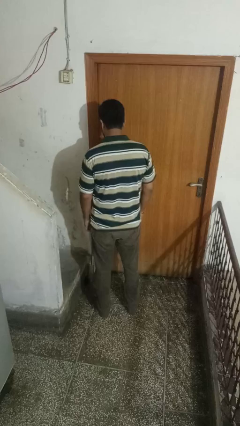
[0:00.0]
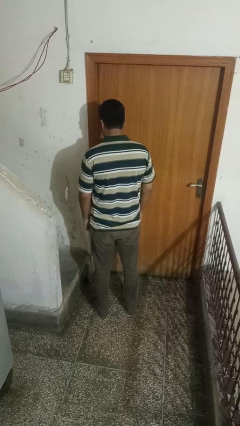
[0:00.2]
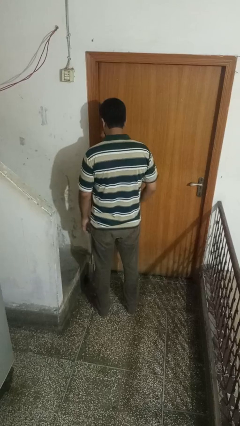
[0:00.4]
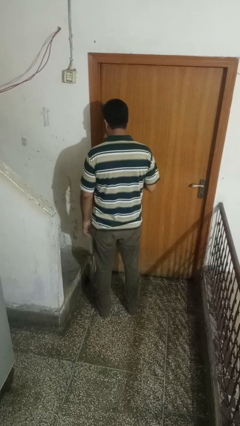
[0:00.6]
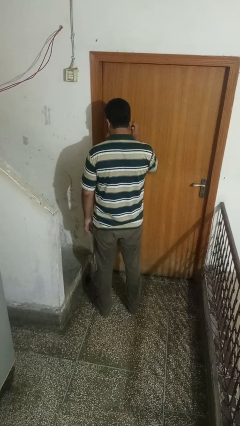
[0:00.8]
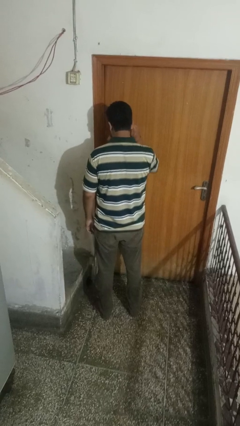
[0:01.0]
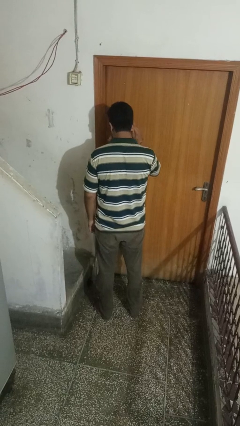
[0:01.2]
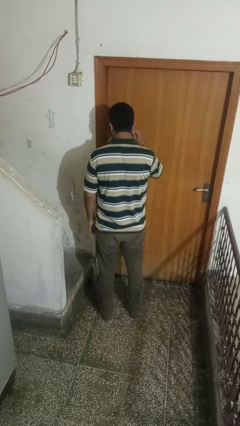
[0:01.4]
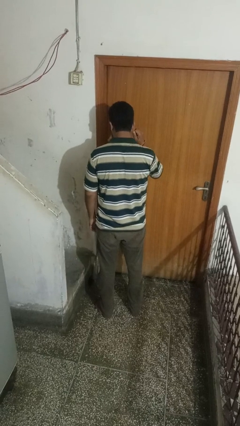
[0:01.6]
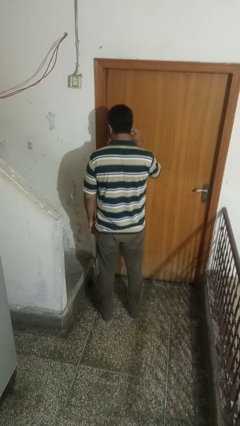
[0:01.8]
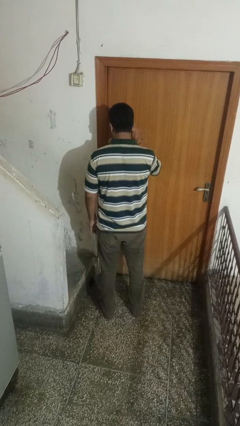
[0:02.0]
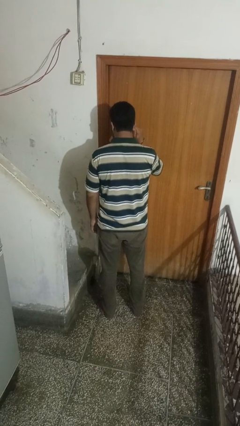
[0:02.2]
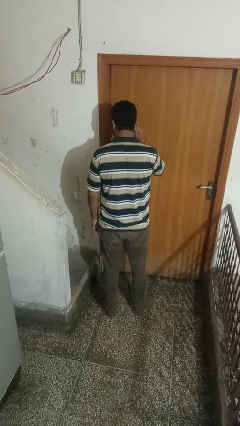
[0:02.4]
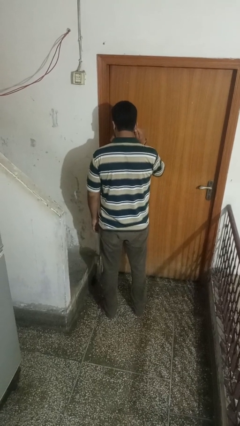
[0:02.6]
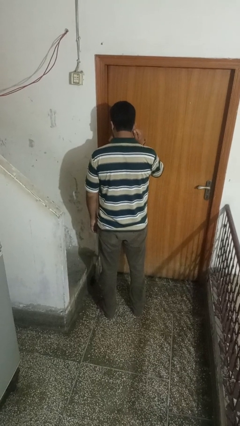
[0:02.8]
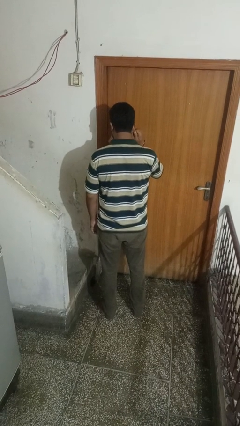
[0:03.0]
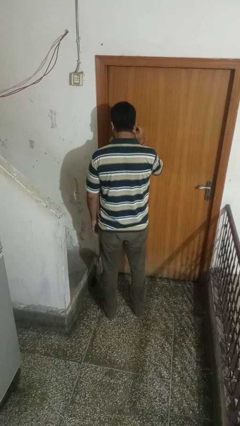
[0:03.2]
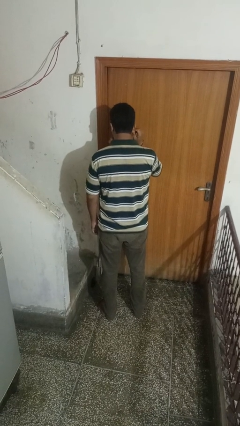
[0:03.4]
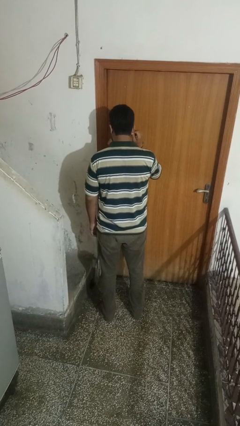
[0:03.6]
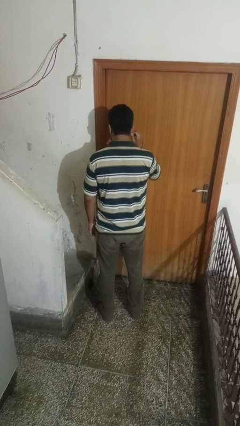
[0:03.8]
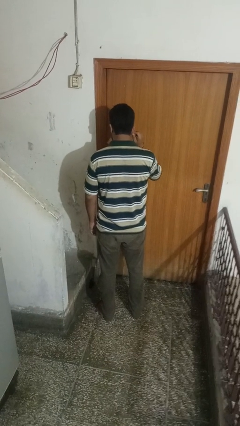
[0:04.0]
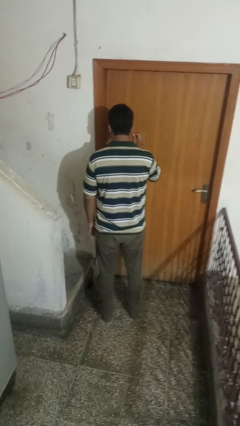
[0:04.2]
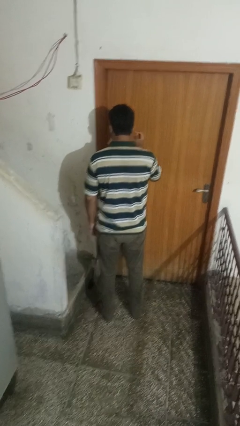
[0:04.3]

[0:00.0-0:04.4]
person touches earlobe

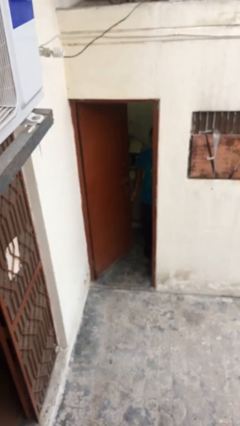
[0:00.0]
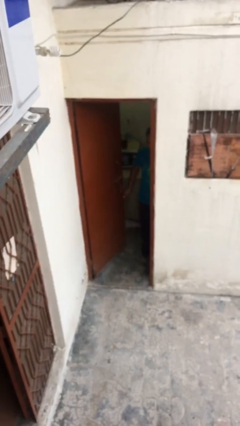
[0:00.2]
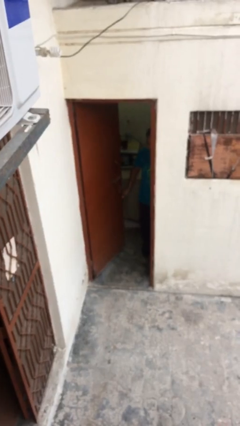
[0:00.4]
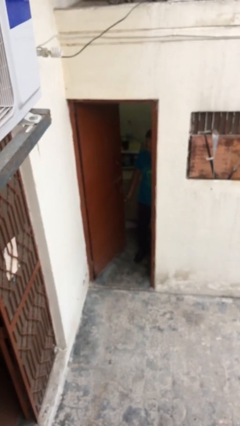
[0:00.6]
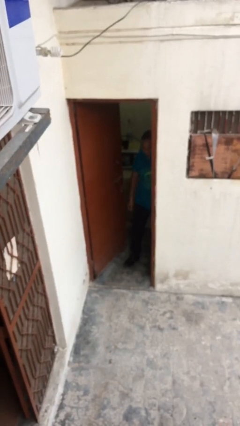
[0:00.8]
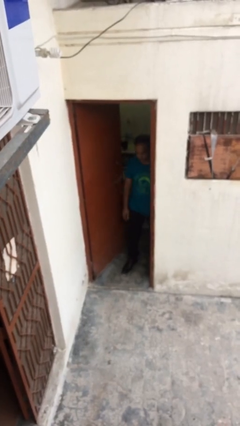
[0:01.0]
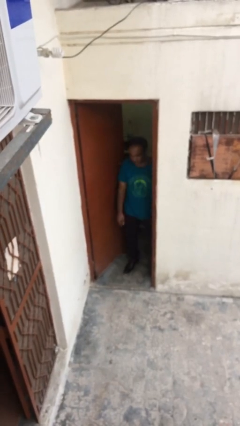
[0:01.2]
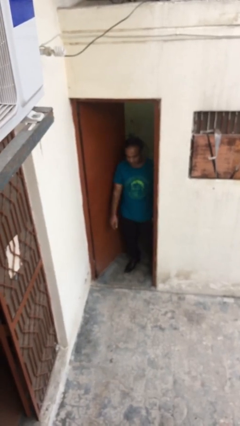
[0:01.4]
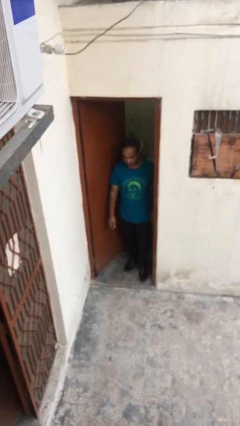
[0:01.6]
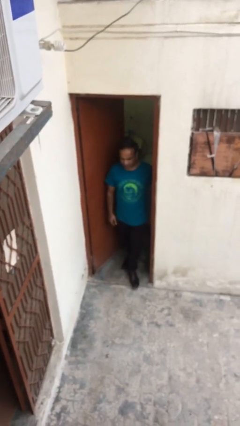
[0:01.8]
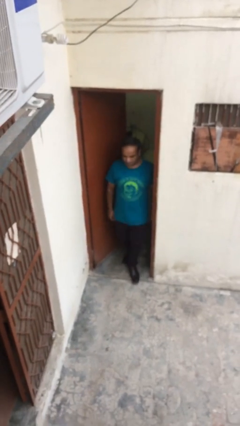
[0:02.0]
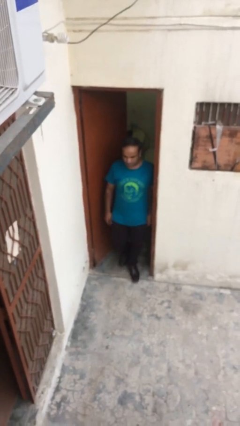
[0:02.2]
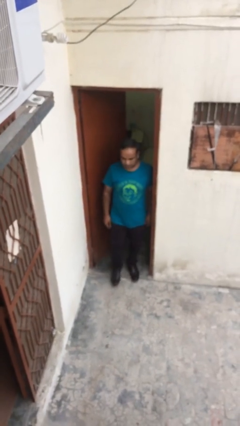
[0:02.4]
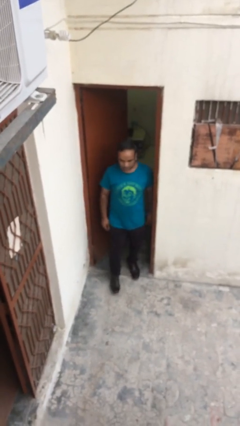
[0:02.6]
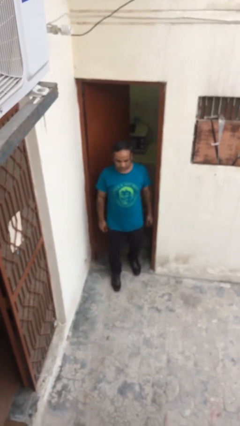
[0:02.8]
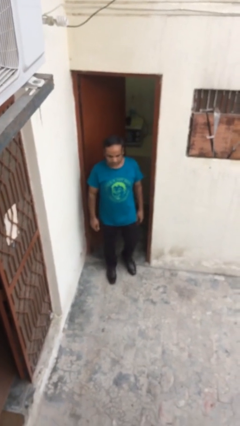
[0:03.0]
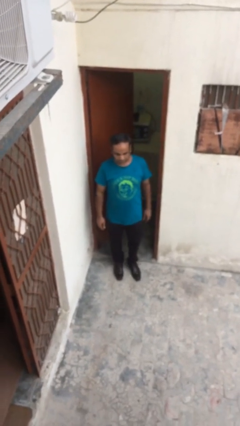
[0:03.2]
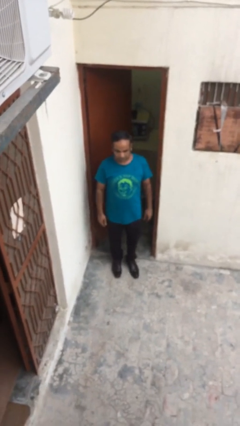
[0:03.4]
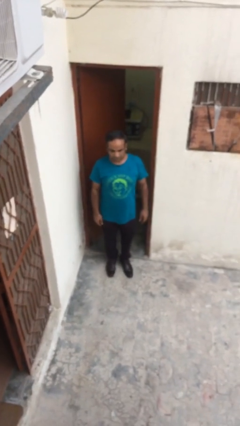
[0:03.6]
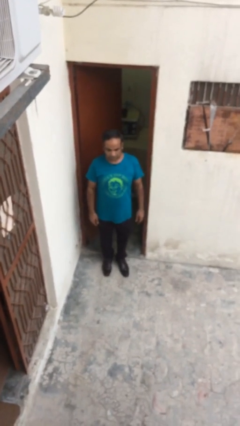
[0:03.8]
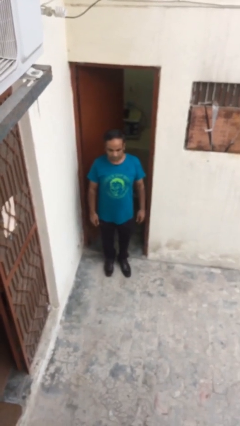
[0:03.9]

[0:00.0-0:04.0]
person enters scene through structure

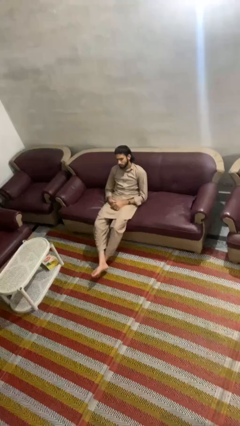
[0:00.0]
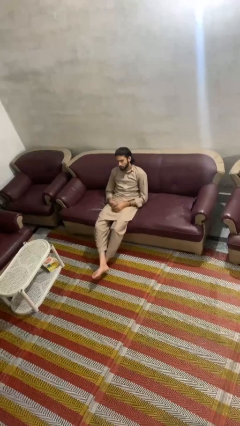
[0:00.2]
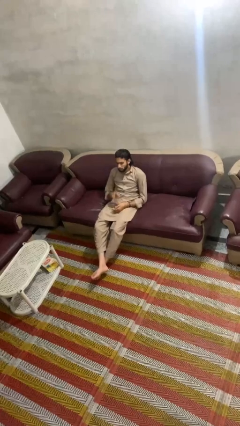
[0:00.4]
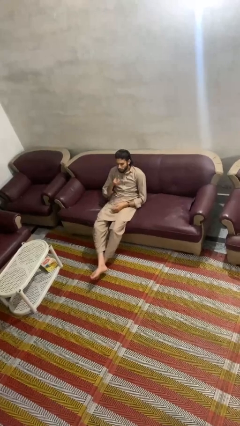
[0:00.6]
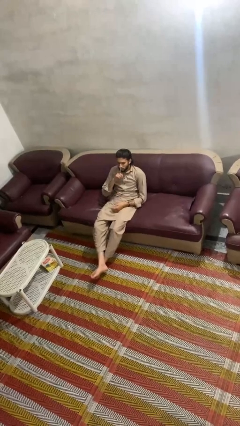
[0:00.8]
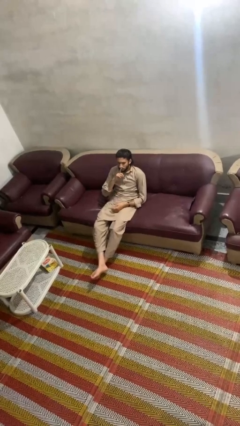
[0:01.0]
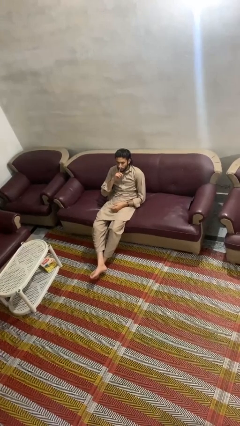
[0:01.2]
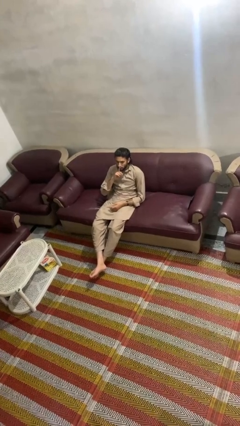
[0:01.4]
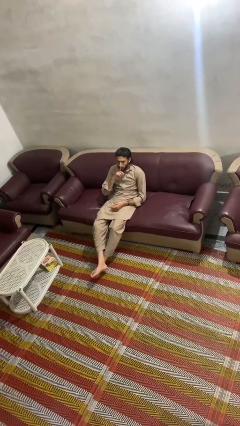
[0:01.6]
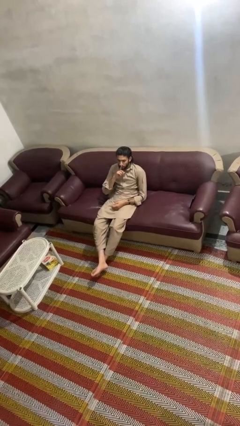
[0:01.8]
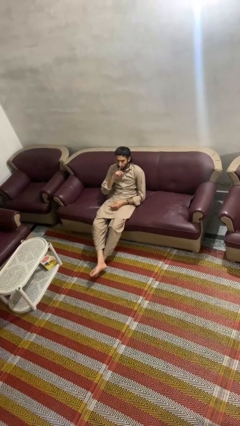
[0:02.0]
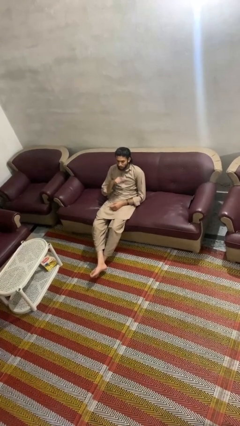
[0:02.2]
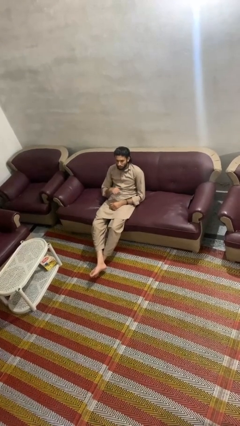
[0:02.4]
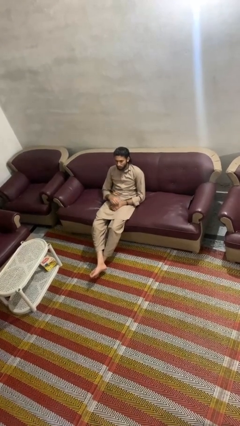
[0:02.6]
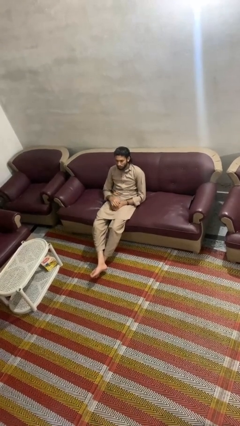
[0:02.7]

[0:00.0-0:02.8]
person gestures be quiet

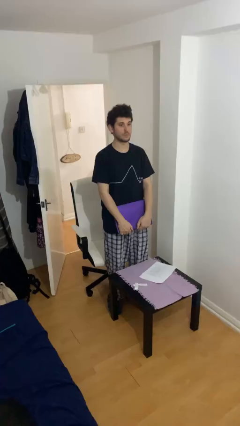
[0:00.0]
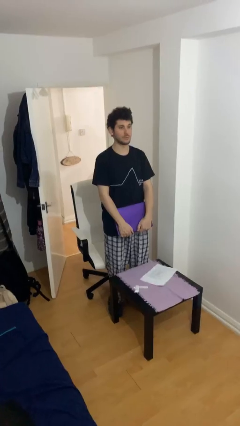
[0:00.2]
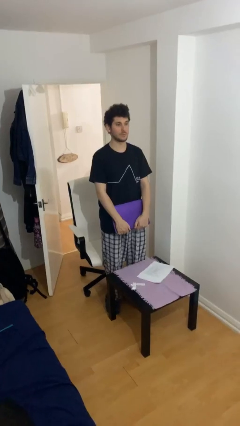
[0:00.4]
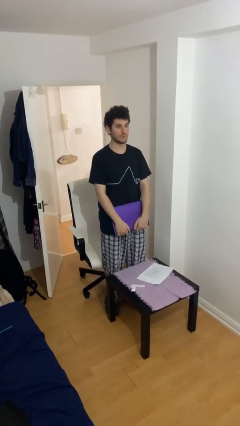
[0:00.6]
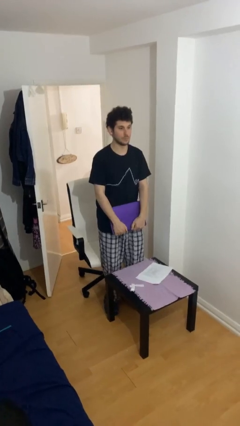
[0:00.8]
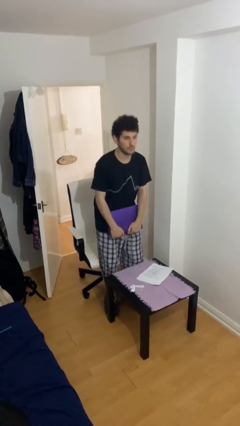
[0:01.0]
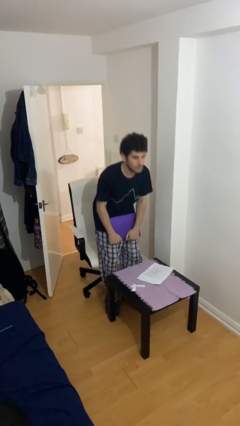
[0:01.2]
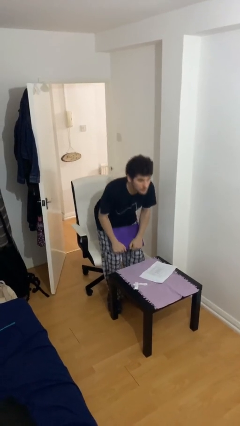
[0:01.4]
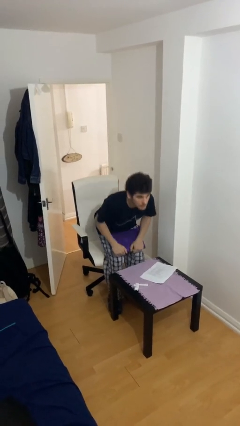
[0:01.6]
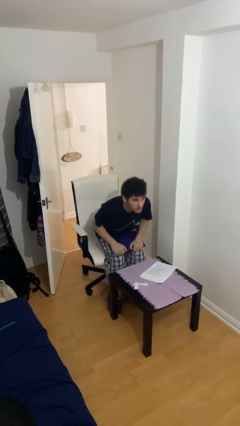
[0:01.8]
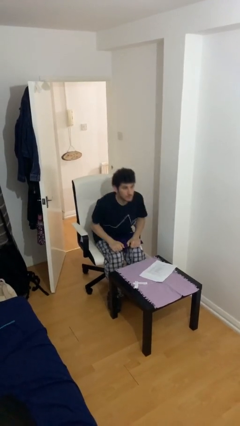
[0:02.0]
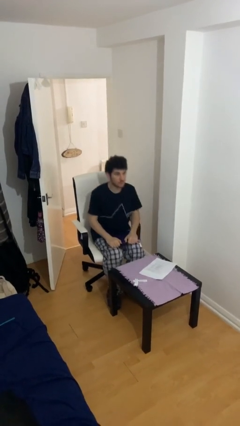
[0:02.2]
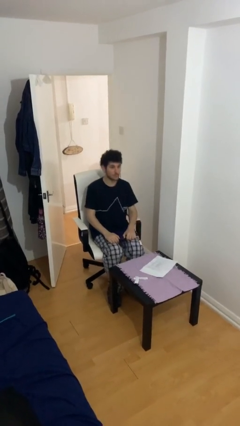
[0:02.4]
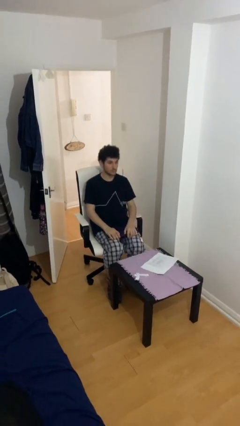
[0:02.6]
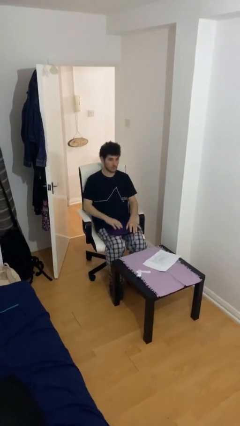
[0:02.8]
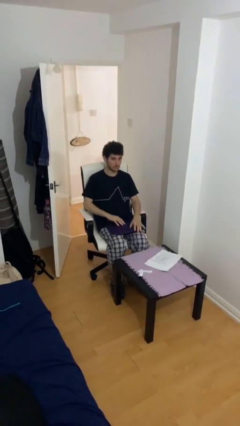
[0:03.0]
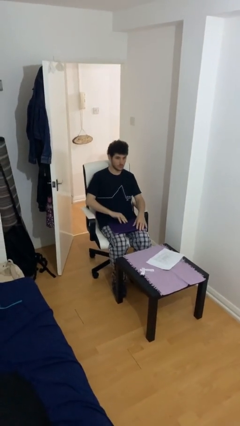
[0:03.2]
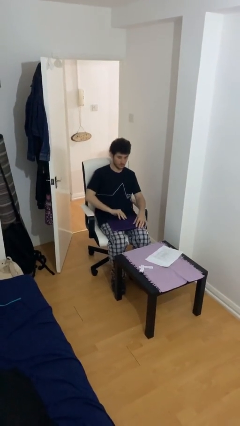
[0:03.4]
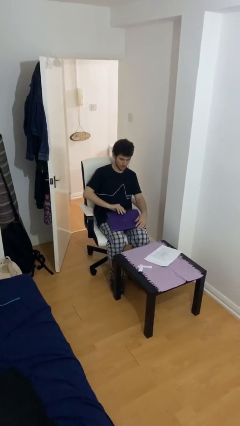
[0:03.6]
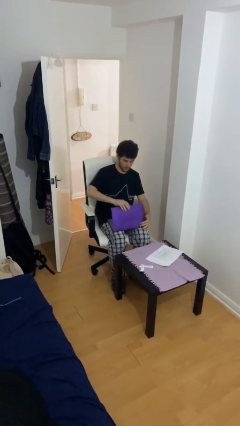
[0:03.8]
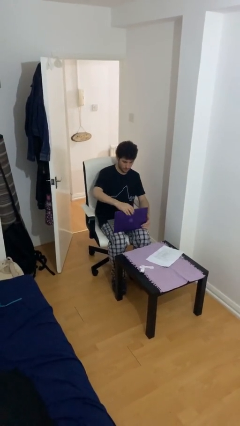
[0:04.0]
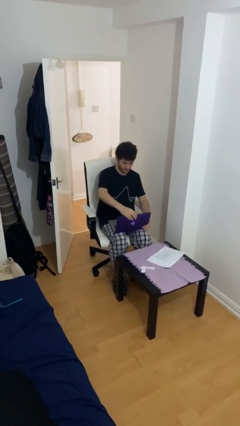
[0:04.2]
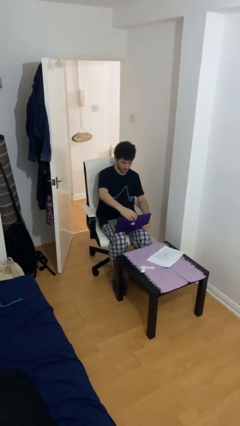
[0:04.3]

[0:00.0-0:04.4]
person sits down

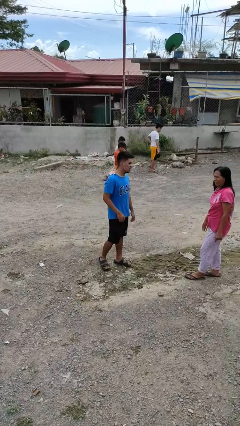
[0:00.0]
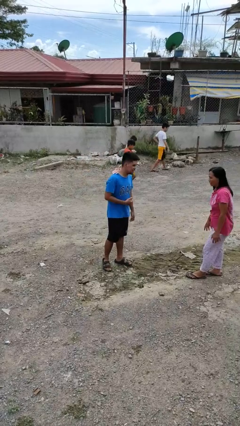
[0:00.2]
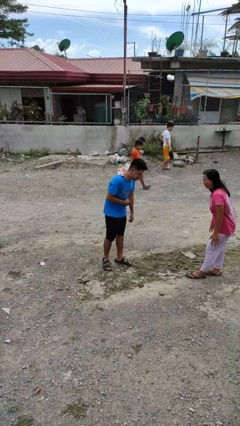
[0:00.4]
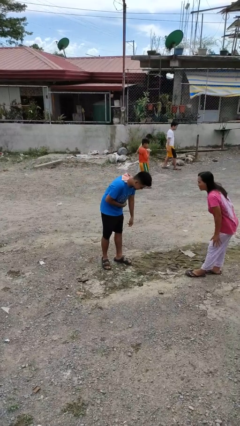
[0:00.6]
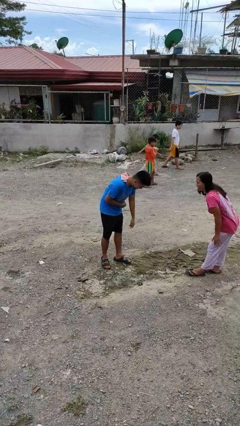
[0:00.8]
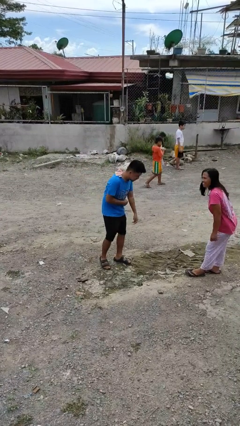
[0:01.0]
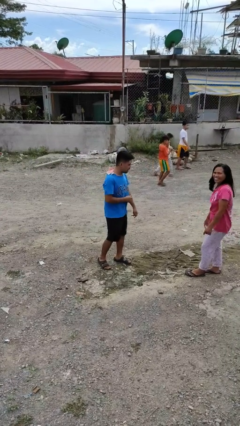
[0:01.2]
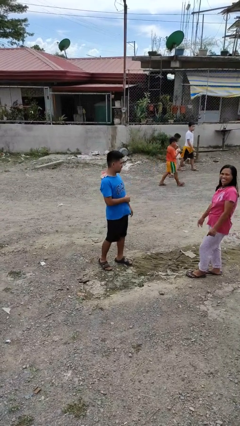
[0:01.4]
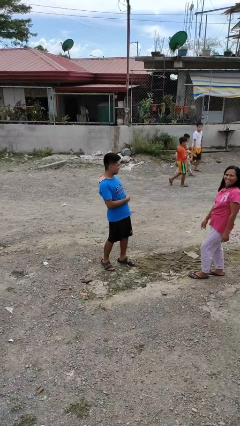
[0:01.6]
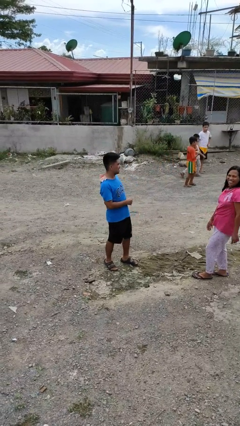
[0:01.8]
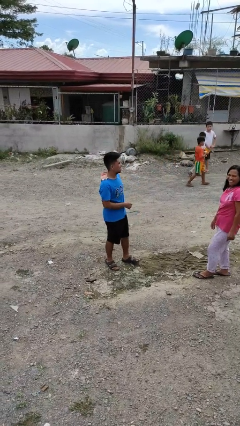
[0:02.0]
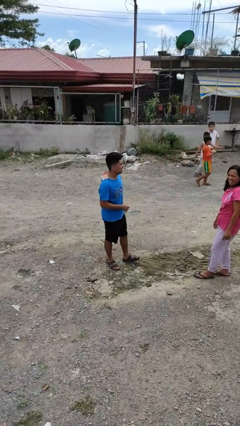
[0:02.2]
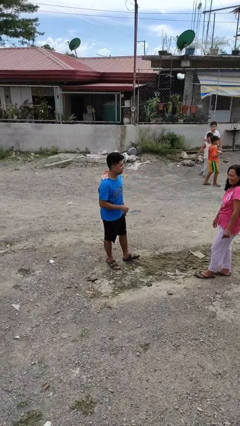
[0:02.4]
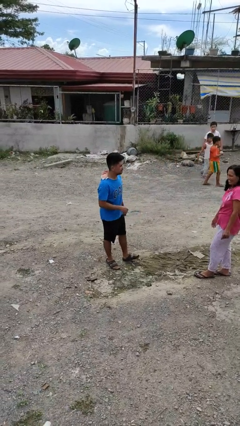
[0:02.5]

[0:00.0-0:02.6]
person laughs with person
